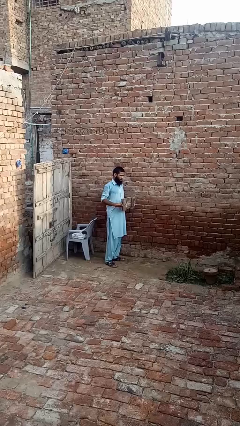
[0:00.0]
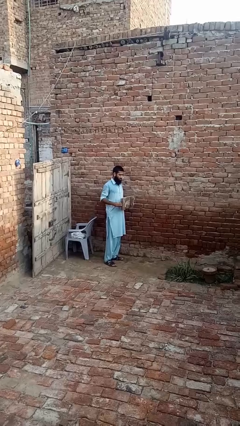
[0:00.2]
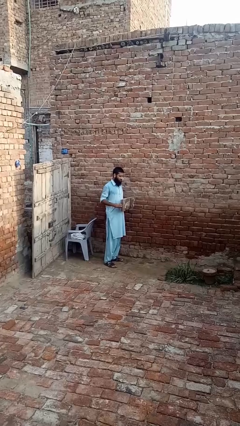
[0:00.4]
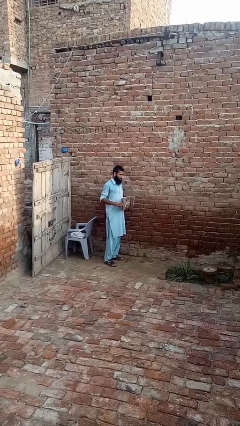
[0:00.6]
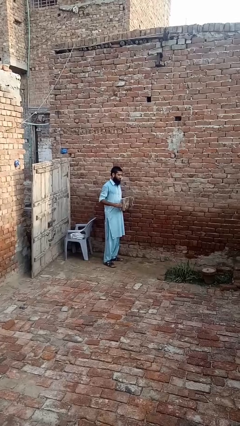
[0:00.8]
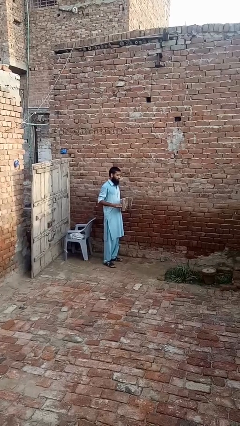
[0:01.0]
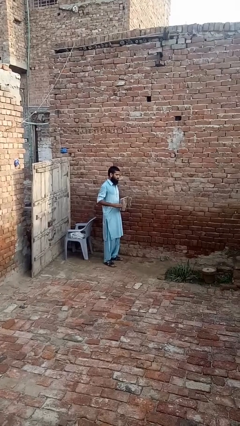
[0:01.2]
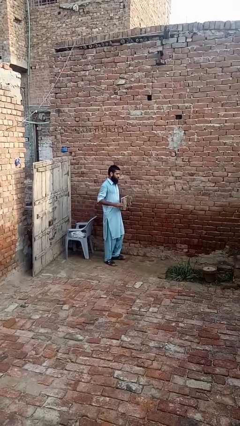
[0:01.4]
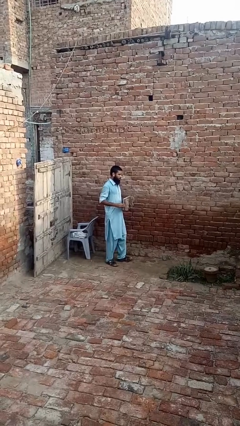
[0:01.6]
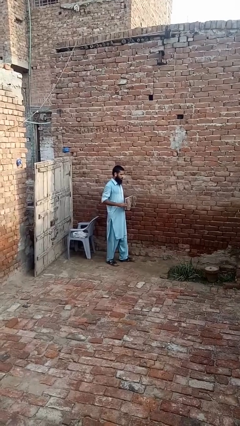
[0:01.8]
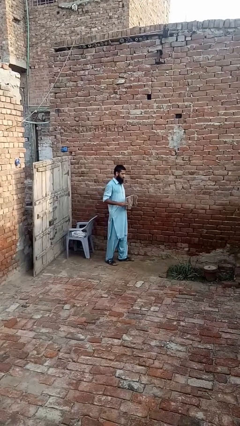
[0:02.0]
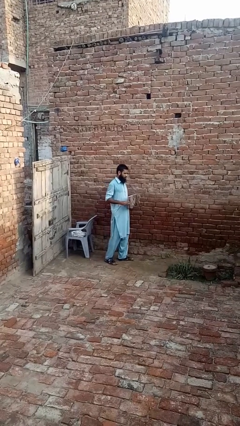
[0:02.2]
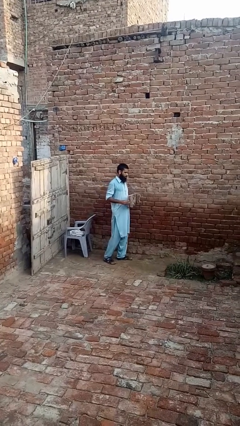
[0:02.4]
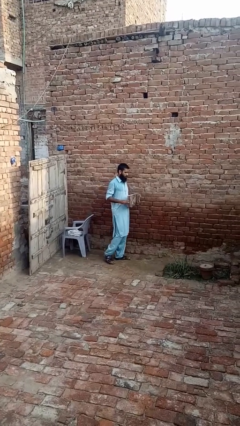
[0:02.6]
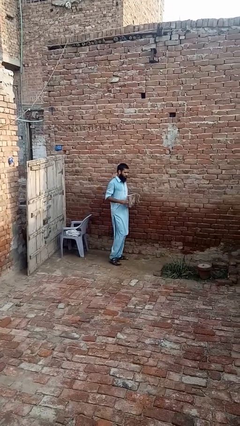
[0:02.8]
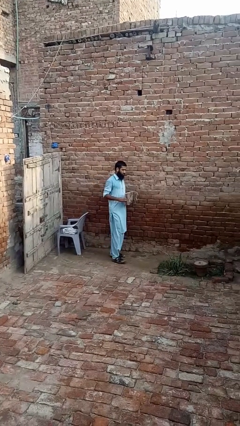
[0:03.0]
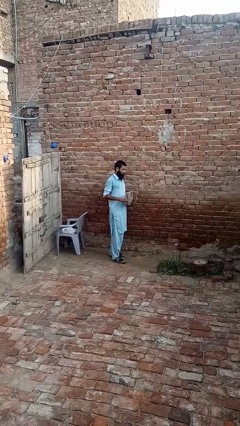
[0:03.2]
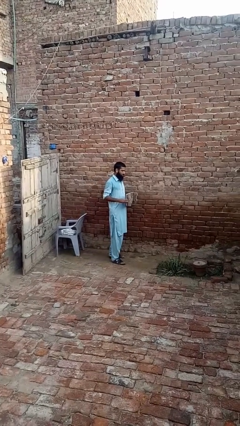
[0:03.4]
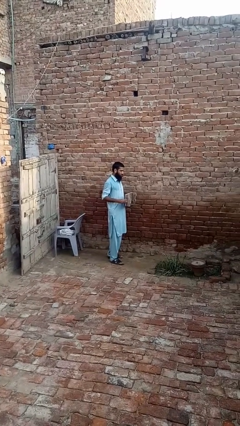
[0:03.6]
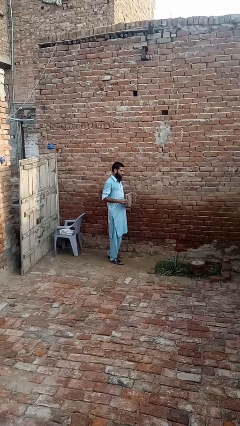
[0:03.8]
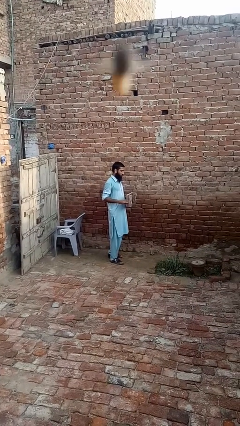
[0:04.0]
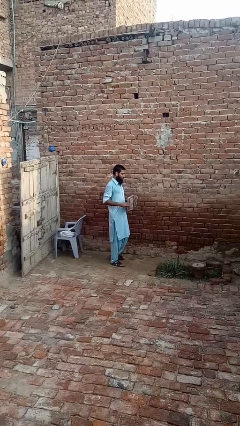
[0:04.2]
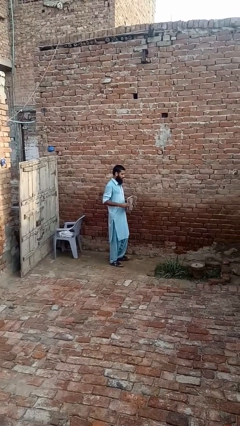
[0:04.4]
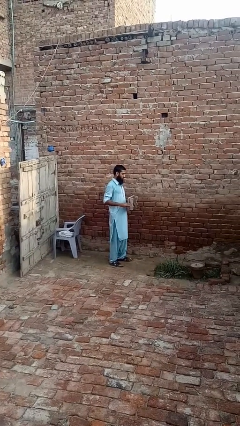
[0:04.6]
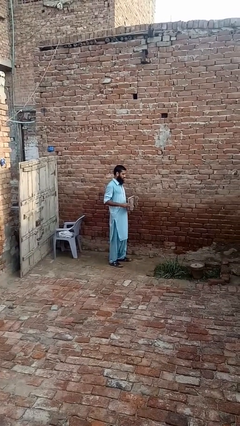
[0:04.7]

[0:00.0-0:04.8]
person carries furniture

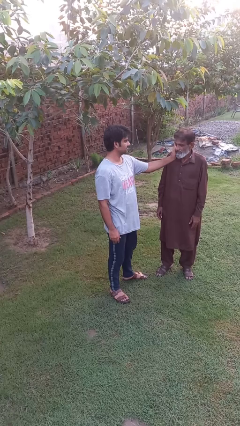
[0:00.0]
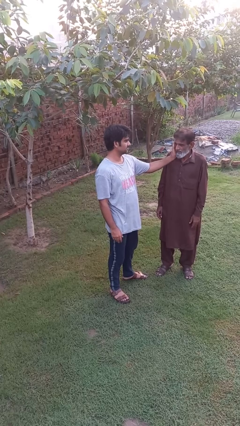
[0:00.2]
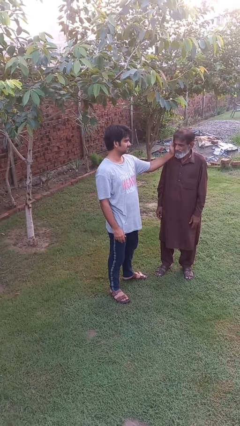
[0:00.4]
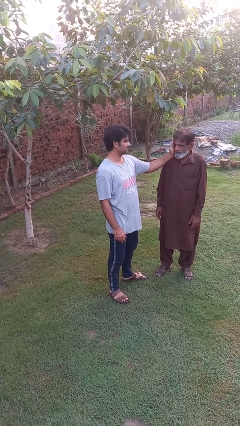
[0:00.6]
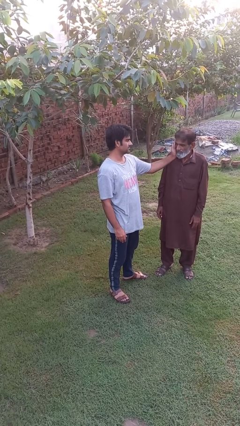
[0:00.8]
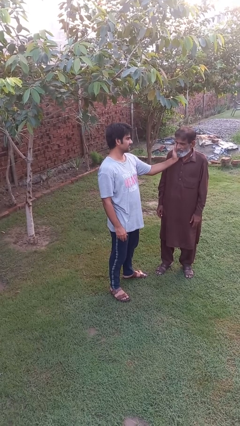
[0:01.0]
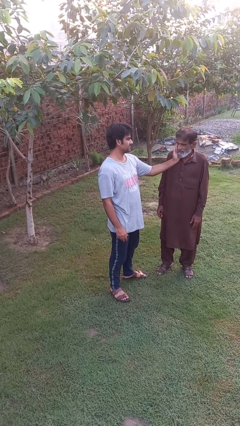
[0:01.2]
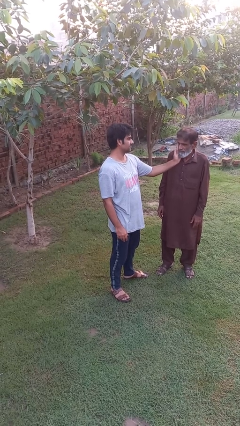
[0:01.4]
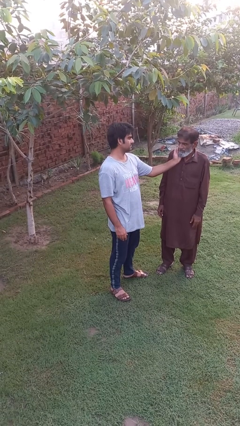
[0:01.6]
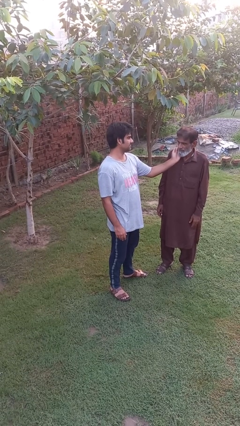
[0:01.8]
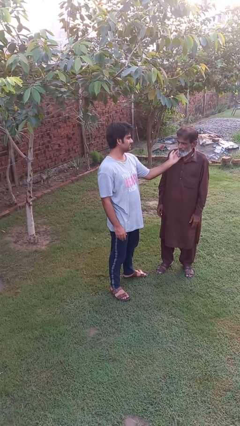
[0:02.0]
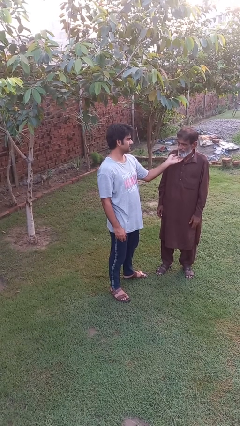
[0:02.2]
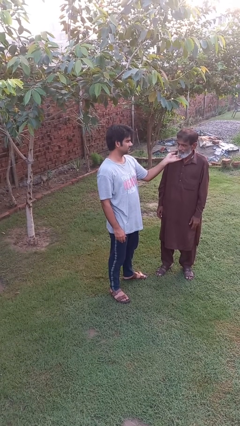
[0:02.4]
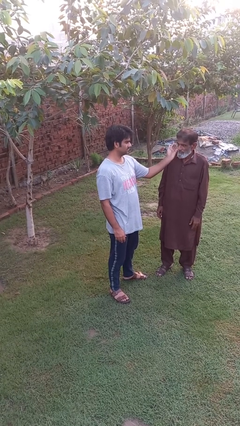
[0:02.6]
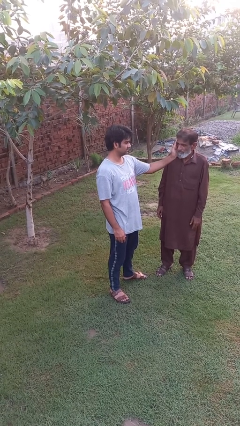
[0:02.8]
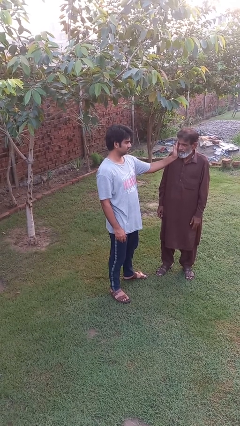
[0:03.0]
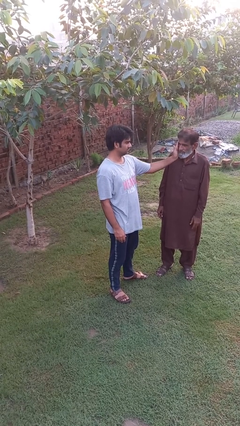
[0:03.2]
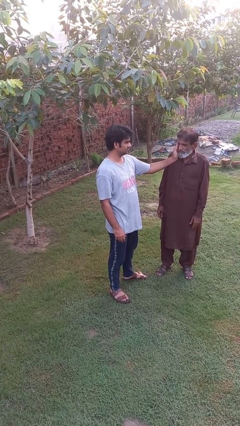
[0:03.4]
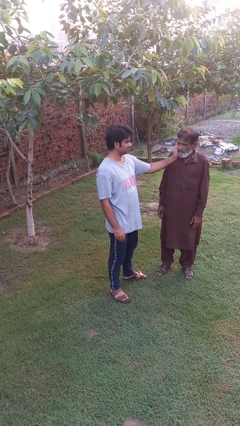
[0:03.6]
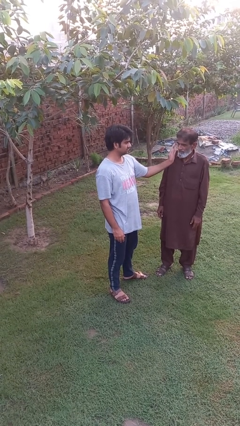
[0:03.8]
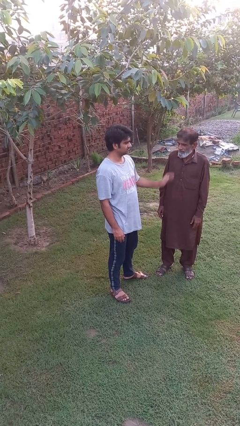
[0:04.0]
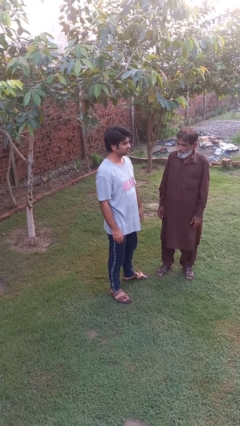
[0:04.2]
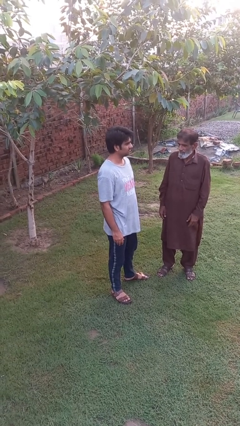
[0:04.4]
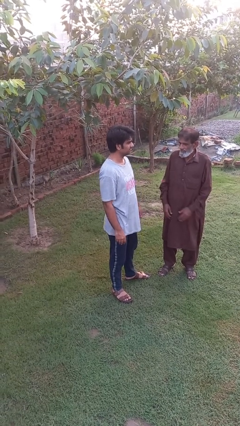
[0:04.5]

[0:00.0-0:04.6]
person touches face of person

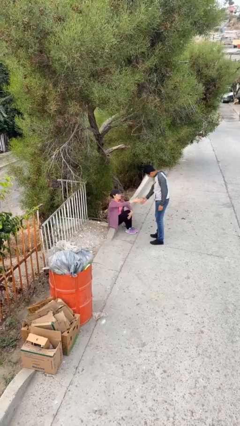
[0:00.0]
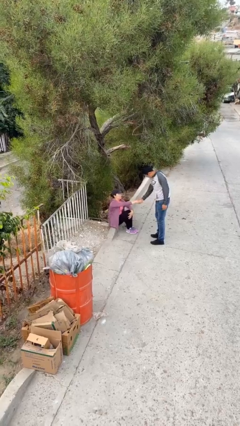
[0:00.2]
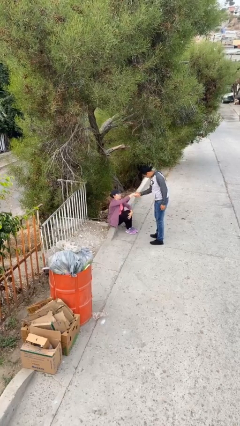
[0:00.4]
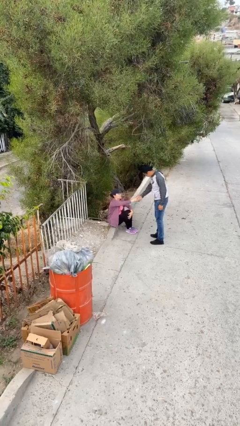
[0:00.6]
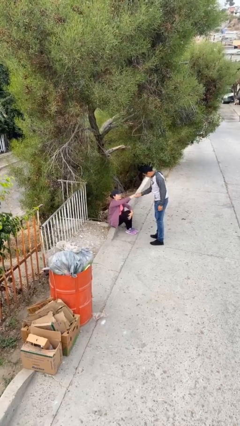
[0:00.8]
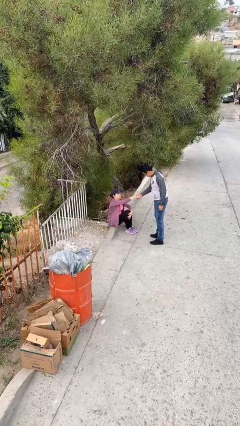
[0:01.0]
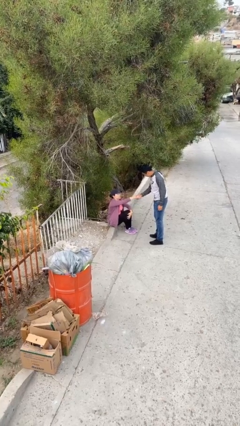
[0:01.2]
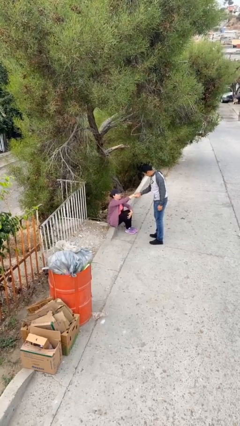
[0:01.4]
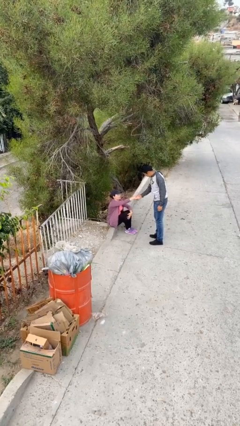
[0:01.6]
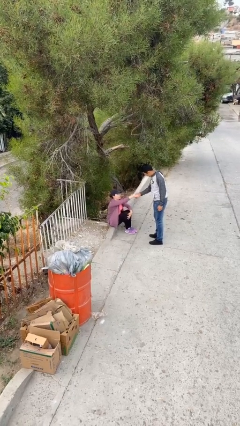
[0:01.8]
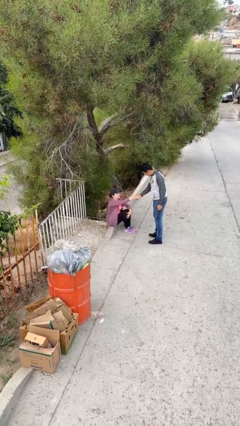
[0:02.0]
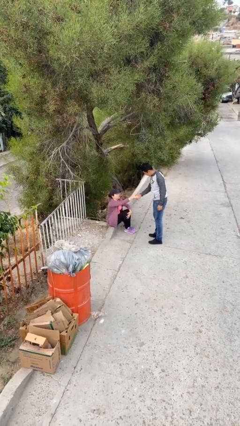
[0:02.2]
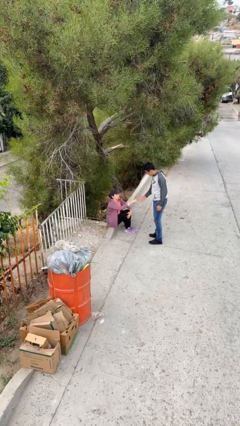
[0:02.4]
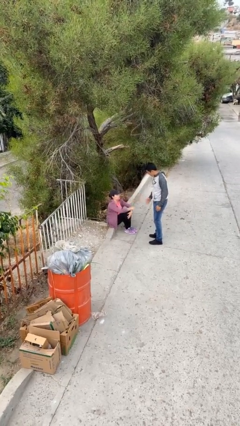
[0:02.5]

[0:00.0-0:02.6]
person shakes hand

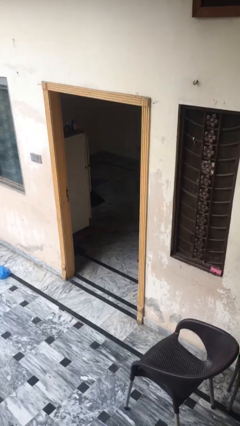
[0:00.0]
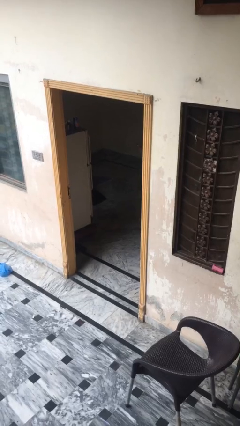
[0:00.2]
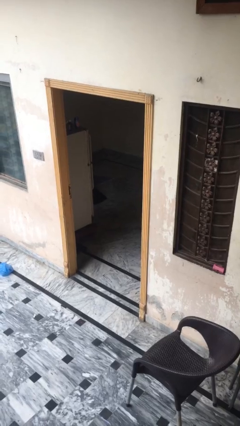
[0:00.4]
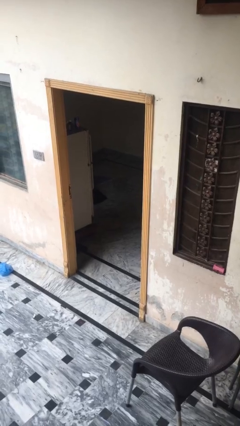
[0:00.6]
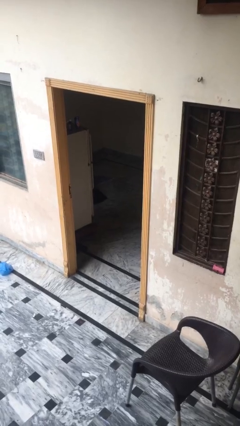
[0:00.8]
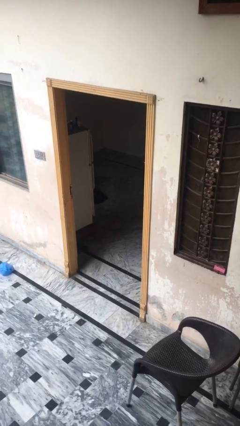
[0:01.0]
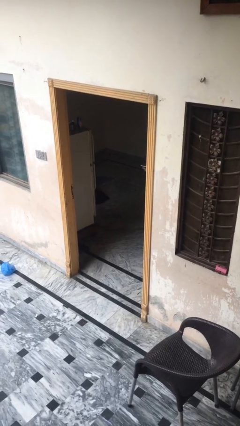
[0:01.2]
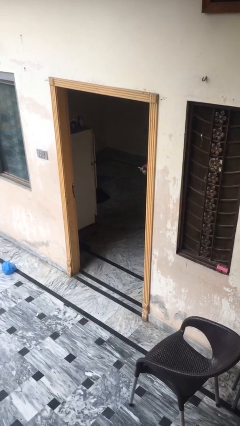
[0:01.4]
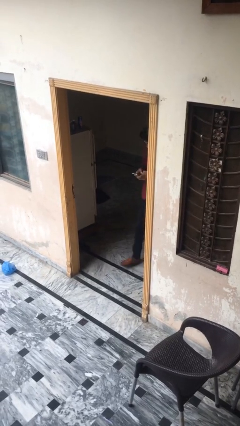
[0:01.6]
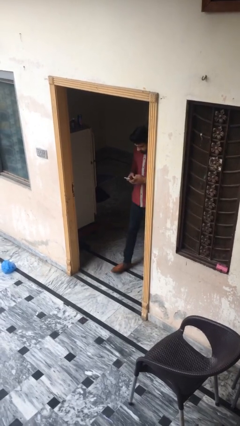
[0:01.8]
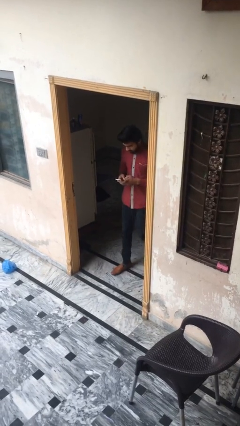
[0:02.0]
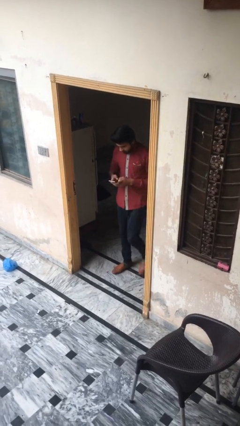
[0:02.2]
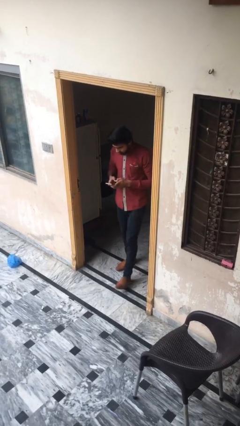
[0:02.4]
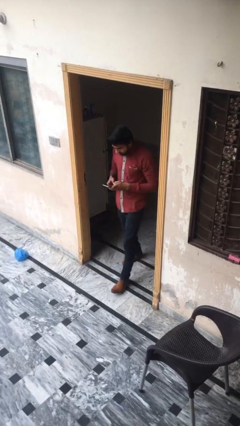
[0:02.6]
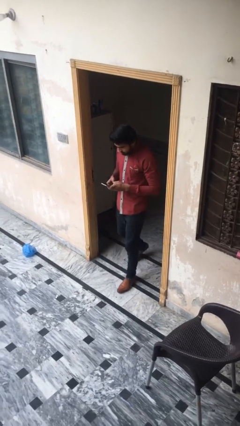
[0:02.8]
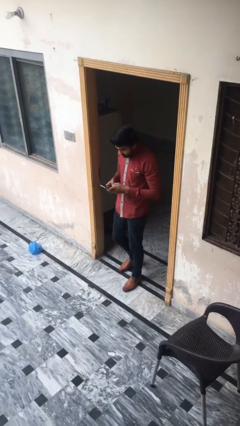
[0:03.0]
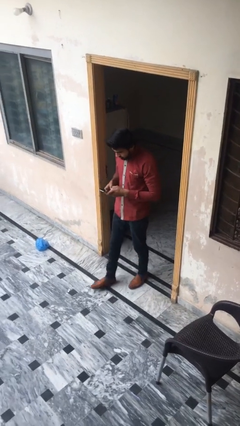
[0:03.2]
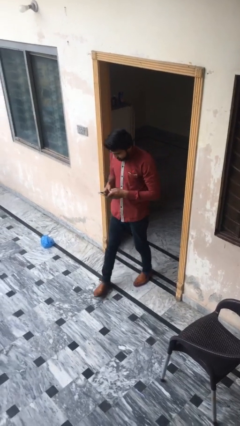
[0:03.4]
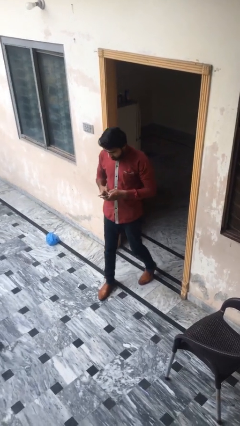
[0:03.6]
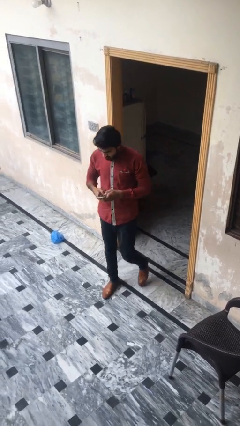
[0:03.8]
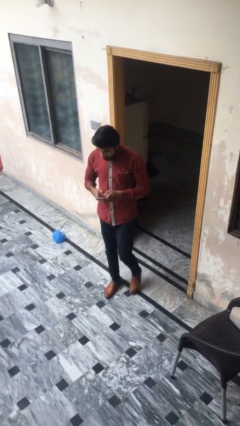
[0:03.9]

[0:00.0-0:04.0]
person enters scene through structure

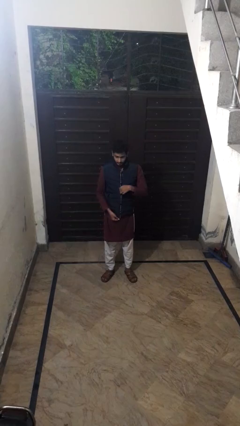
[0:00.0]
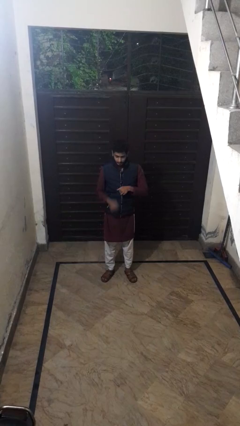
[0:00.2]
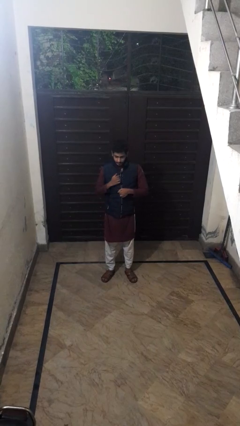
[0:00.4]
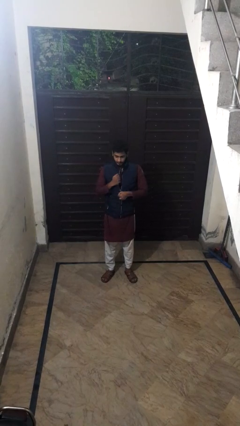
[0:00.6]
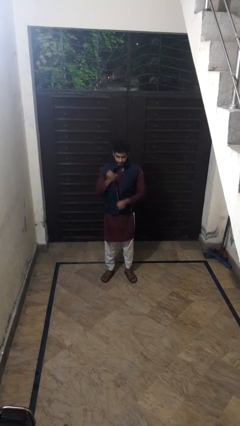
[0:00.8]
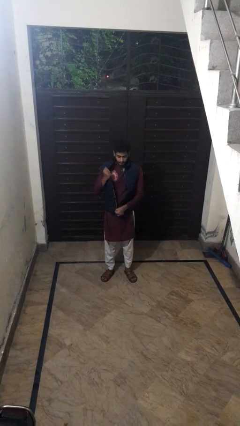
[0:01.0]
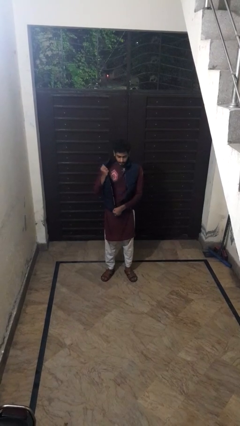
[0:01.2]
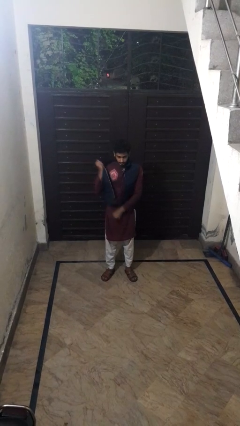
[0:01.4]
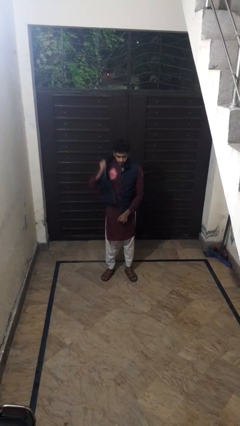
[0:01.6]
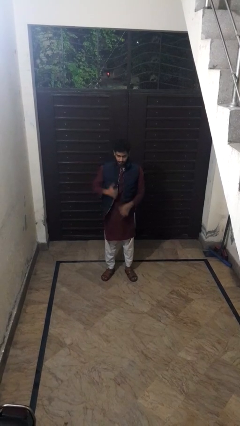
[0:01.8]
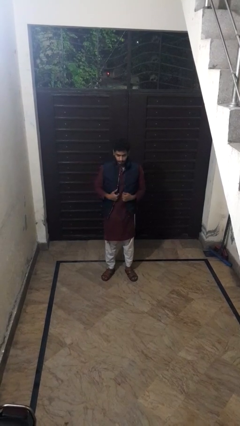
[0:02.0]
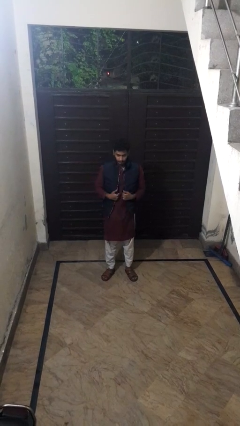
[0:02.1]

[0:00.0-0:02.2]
person unzips jacket
